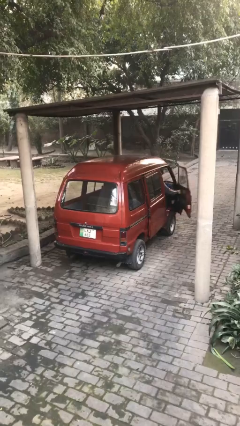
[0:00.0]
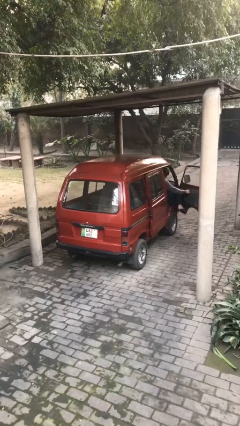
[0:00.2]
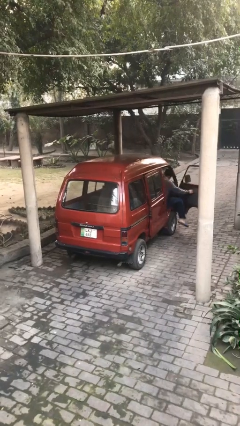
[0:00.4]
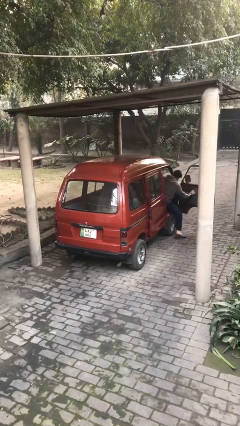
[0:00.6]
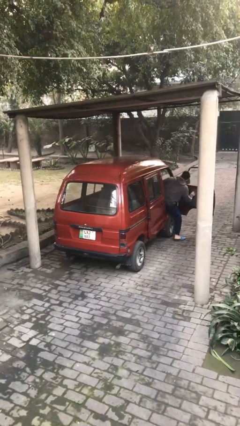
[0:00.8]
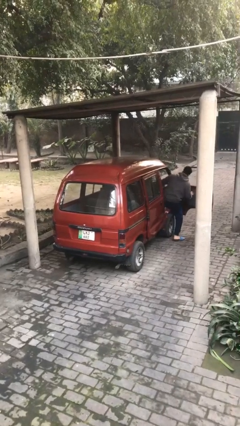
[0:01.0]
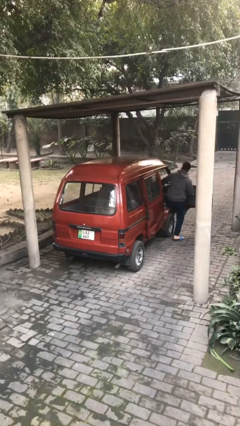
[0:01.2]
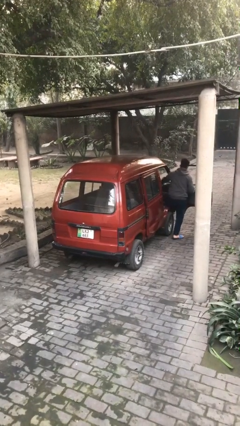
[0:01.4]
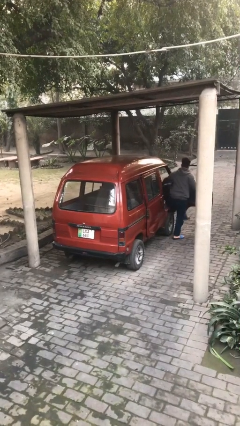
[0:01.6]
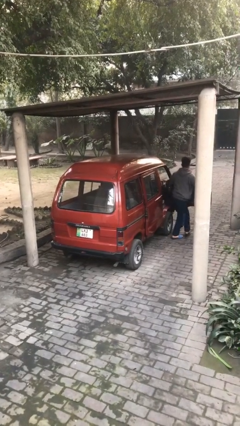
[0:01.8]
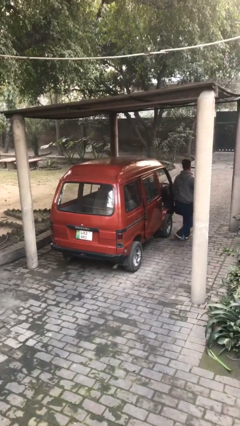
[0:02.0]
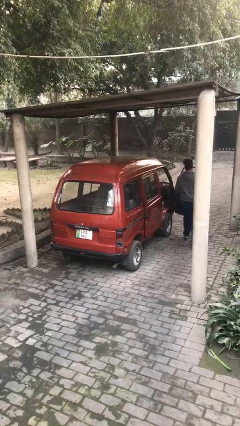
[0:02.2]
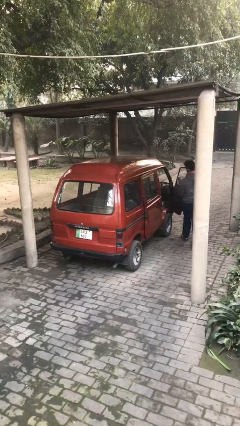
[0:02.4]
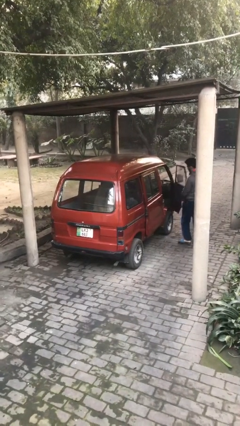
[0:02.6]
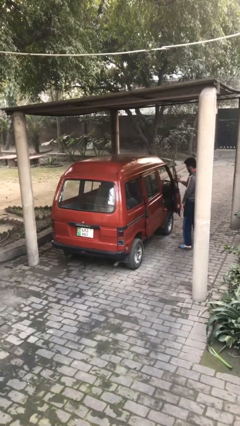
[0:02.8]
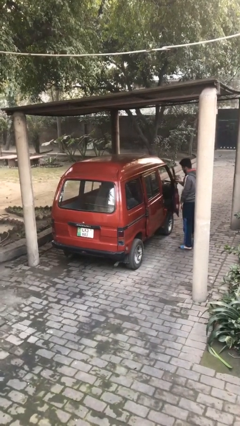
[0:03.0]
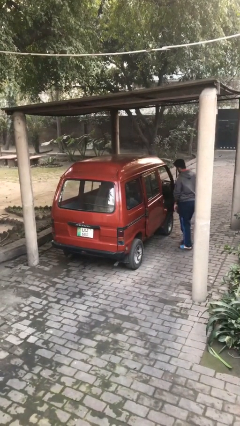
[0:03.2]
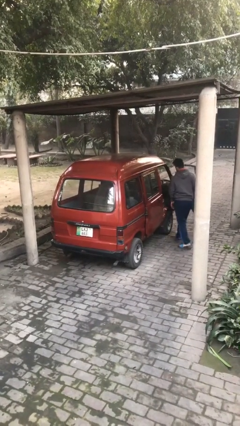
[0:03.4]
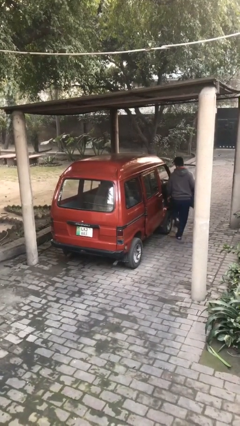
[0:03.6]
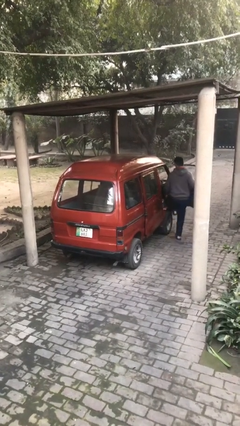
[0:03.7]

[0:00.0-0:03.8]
car drops off person

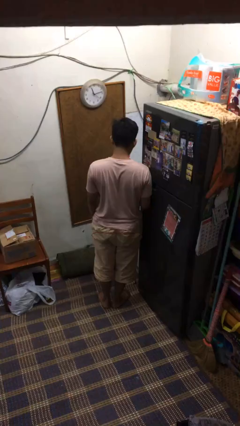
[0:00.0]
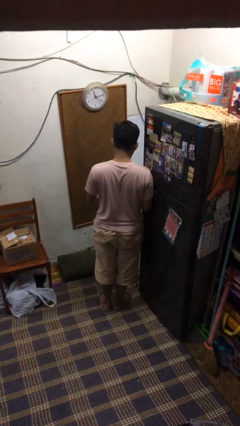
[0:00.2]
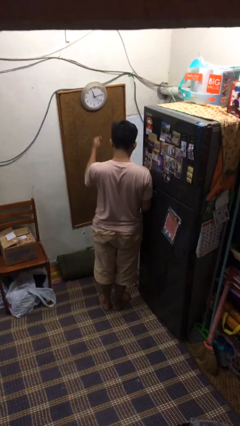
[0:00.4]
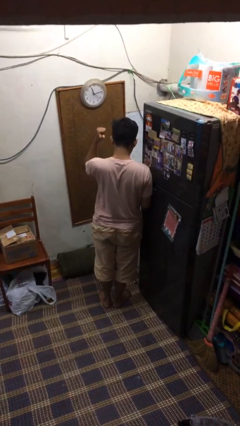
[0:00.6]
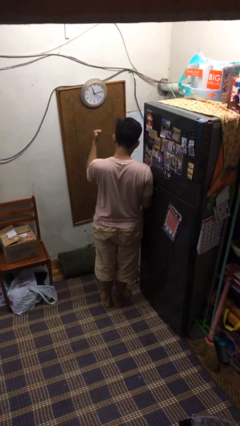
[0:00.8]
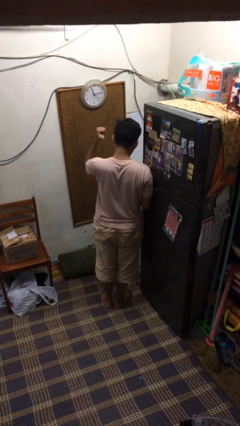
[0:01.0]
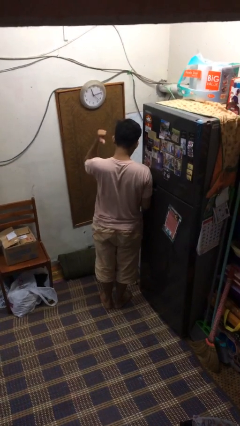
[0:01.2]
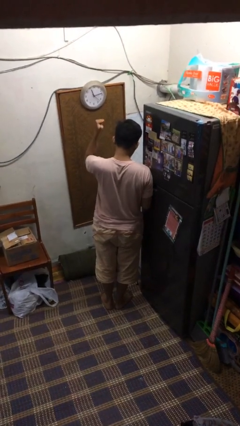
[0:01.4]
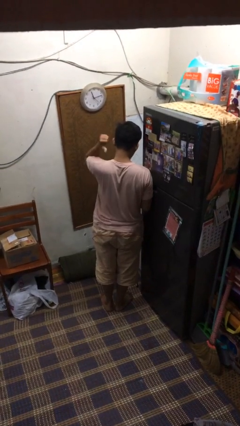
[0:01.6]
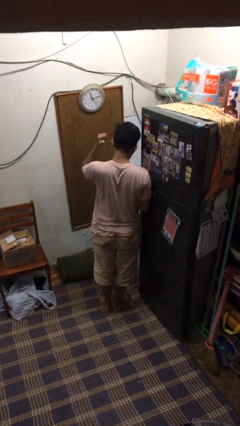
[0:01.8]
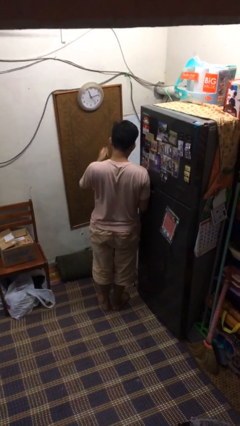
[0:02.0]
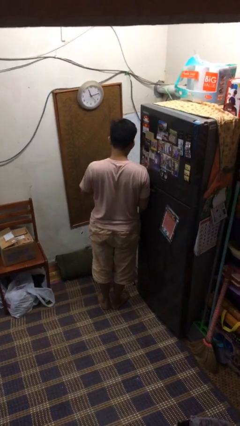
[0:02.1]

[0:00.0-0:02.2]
person gestures behind me

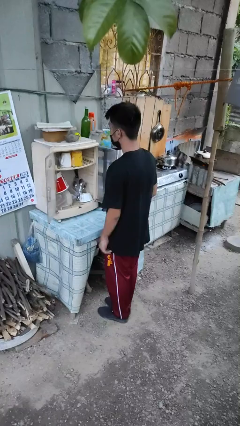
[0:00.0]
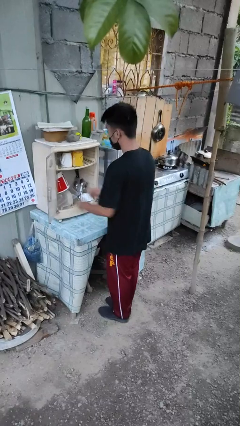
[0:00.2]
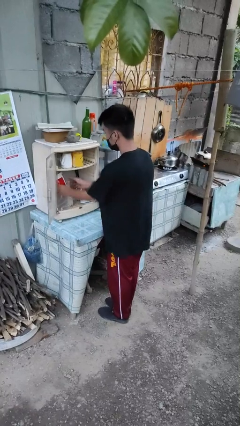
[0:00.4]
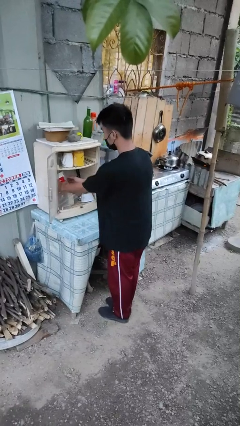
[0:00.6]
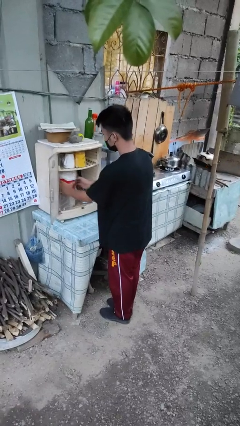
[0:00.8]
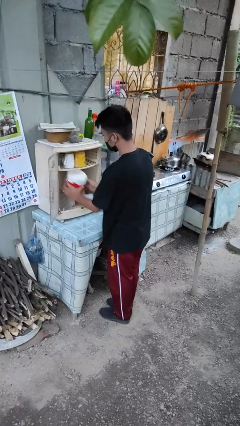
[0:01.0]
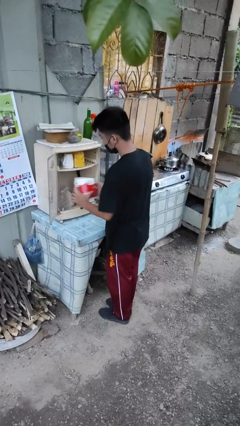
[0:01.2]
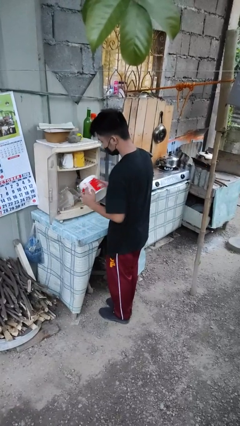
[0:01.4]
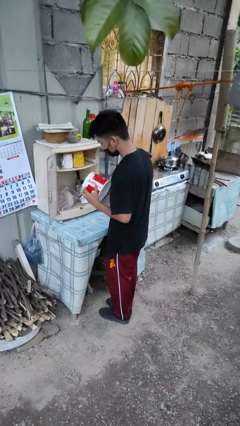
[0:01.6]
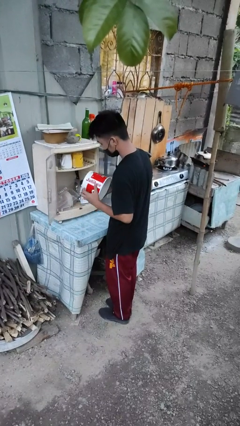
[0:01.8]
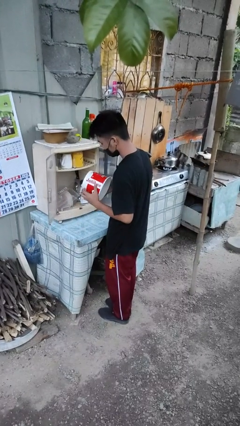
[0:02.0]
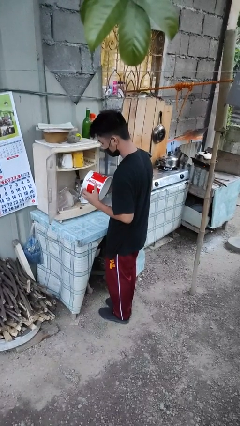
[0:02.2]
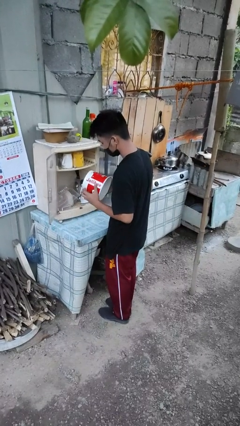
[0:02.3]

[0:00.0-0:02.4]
person picks up object from cabinet

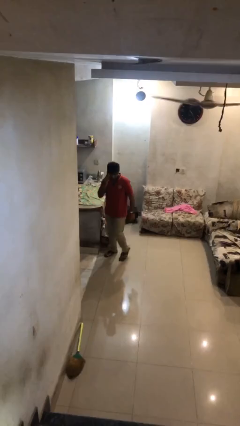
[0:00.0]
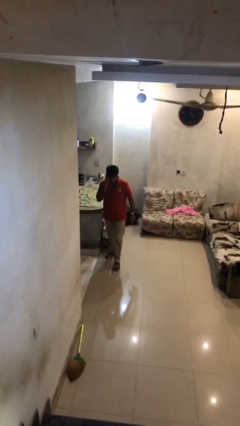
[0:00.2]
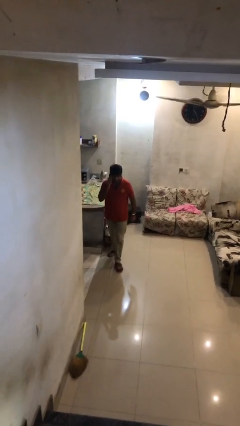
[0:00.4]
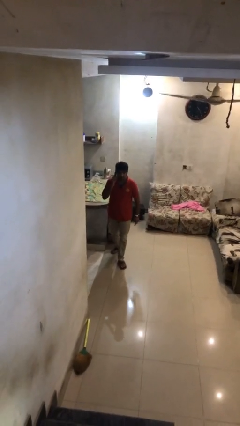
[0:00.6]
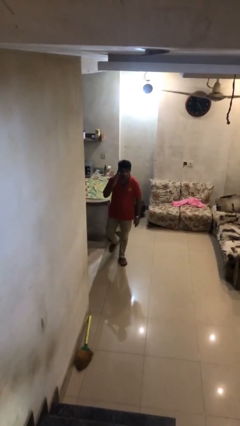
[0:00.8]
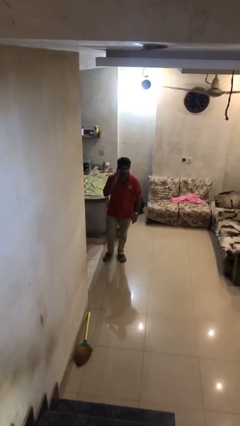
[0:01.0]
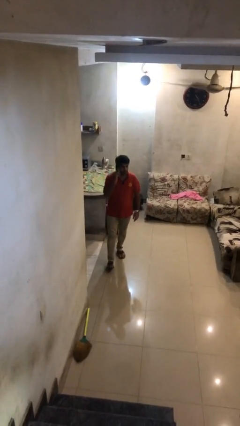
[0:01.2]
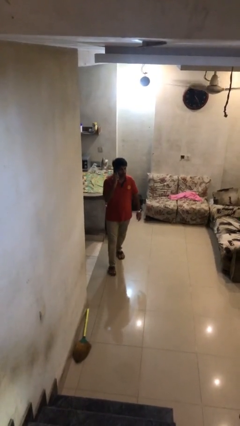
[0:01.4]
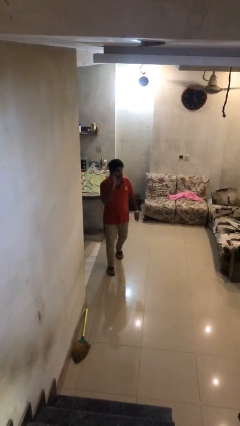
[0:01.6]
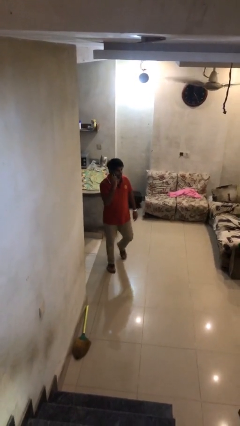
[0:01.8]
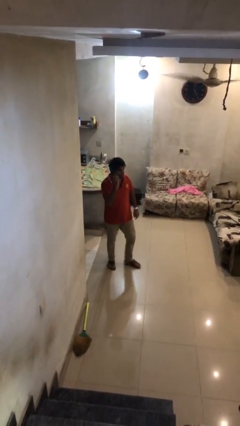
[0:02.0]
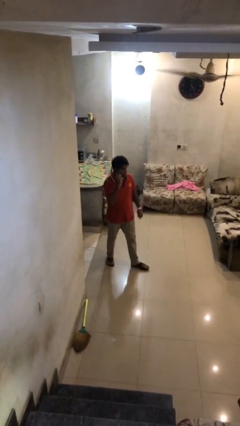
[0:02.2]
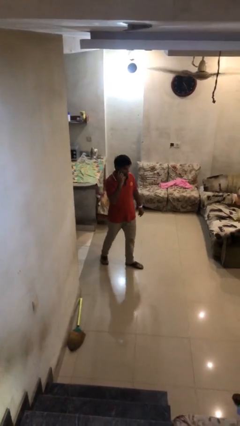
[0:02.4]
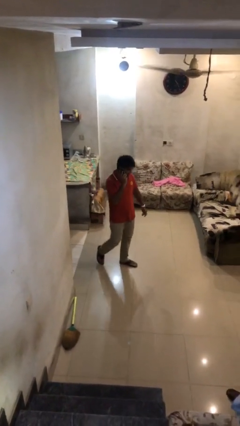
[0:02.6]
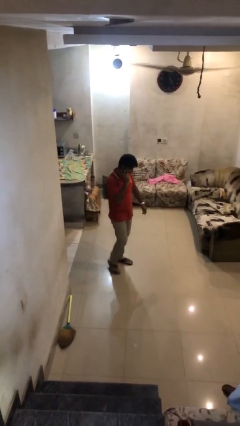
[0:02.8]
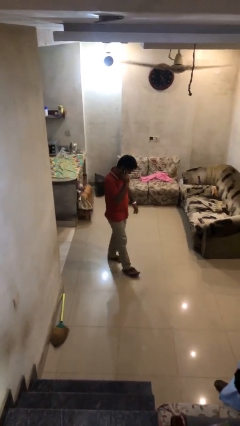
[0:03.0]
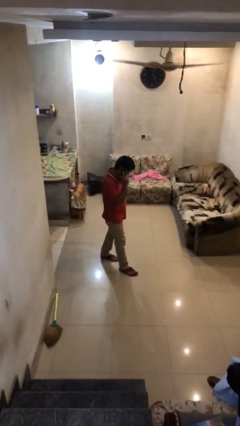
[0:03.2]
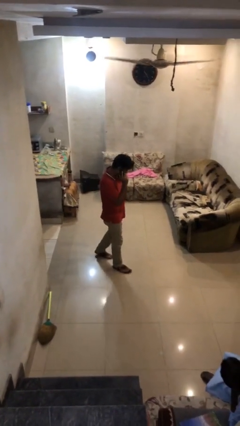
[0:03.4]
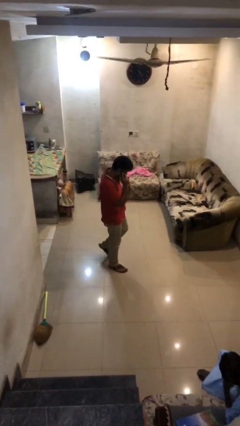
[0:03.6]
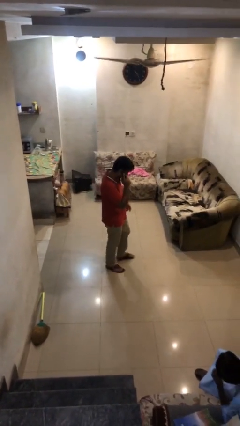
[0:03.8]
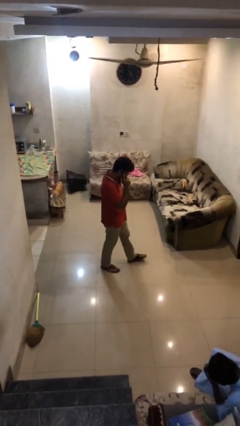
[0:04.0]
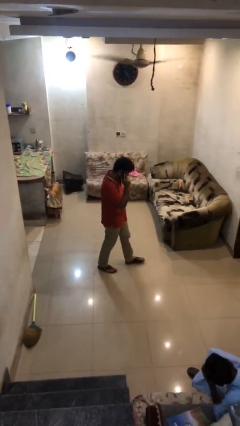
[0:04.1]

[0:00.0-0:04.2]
person talks on phone

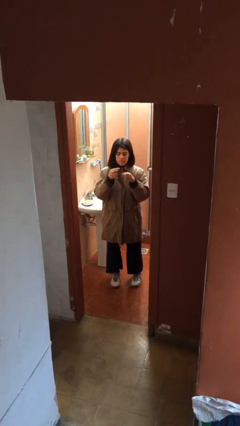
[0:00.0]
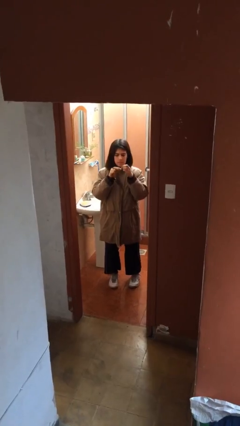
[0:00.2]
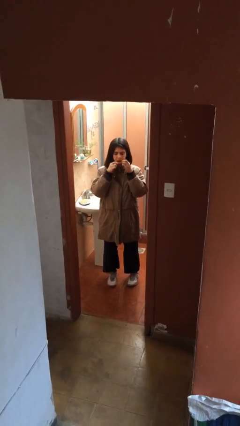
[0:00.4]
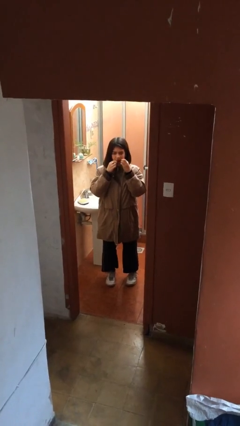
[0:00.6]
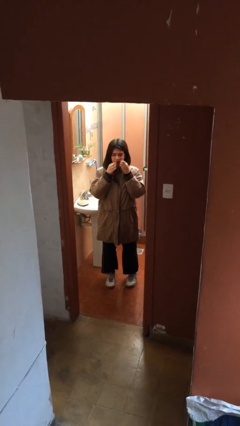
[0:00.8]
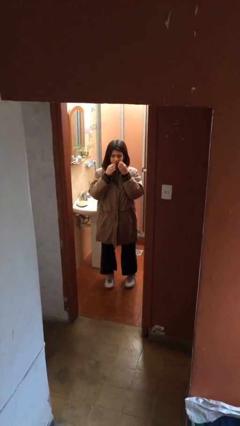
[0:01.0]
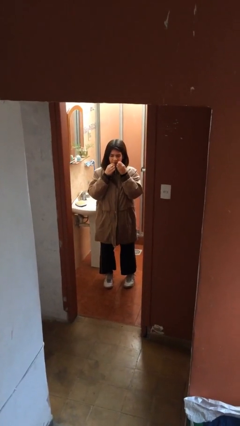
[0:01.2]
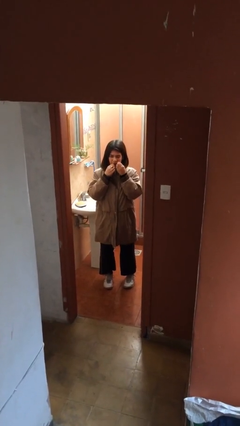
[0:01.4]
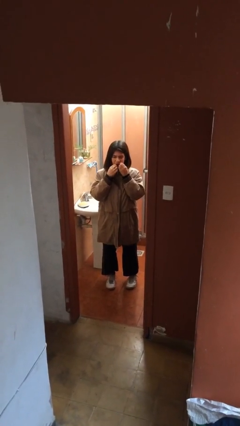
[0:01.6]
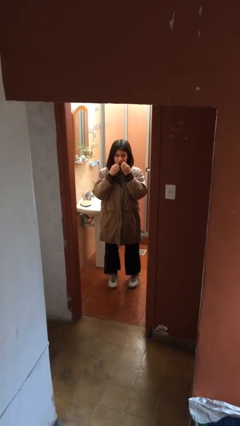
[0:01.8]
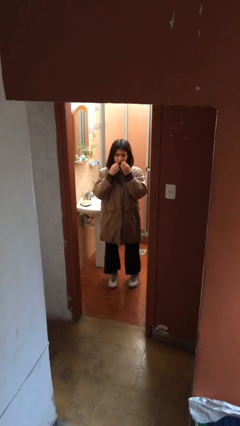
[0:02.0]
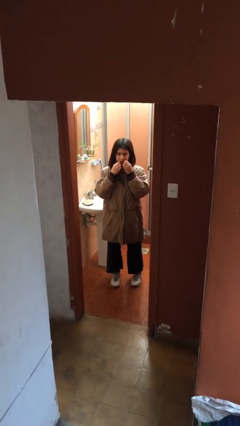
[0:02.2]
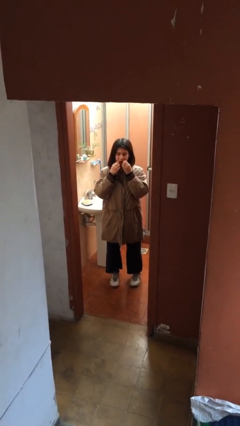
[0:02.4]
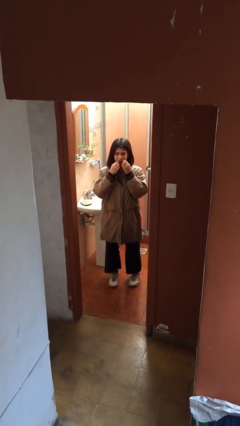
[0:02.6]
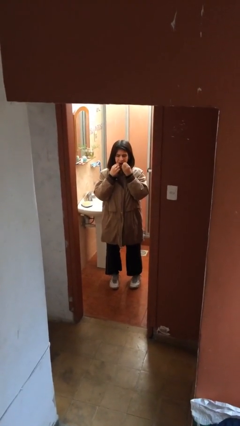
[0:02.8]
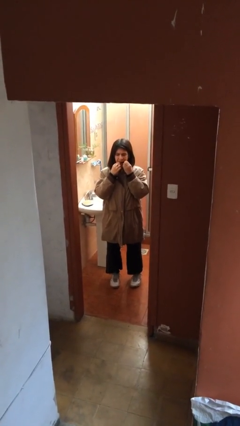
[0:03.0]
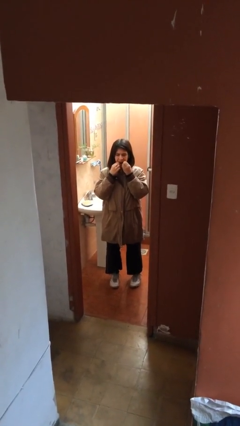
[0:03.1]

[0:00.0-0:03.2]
person flosses

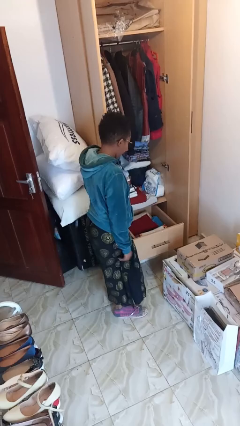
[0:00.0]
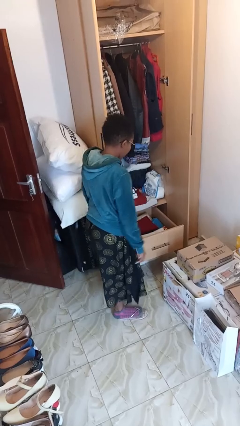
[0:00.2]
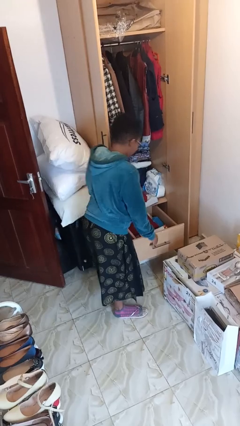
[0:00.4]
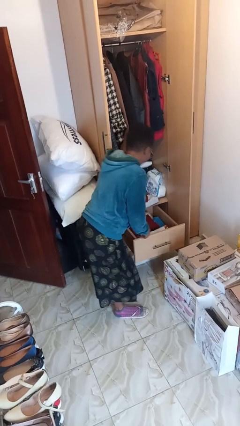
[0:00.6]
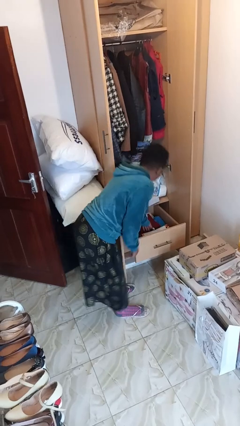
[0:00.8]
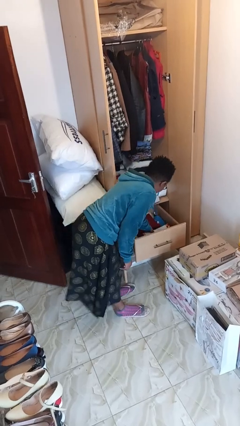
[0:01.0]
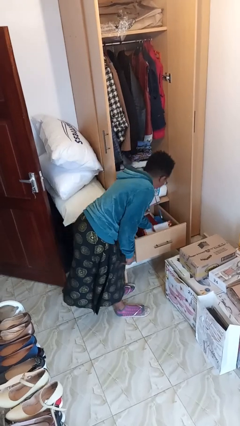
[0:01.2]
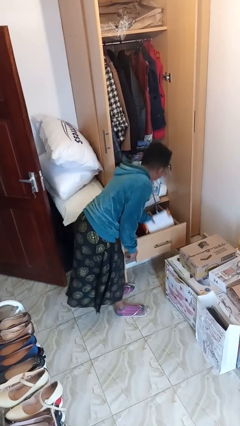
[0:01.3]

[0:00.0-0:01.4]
person takes clothes from dresser
